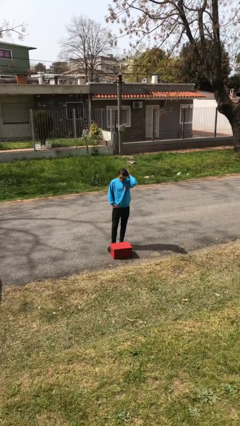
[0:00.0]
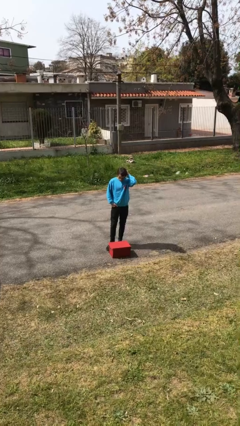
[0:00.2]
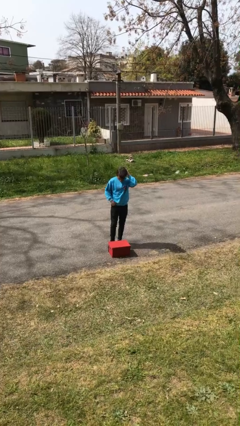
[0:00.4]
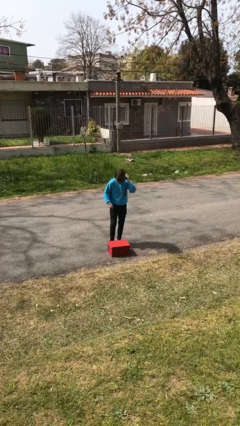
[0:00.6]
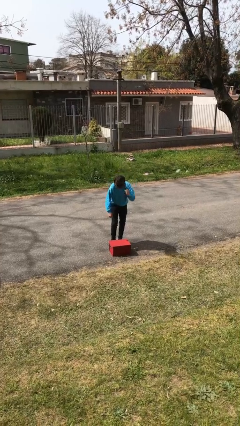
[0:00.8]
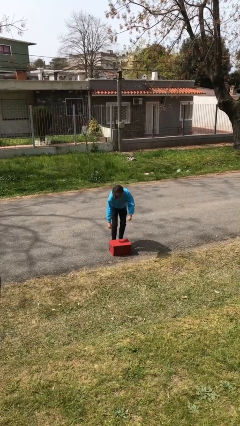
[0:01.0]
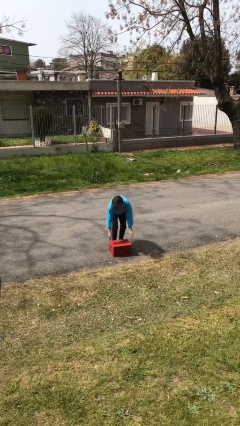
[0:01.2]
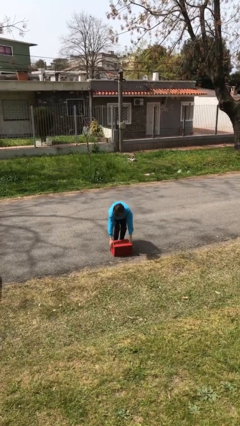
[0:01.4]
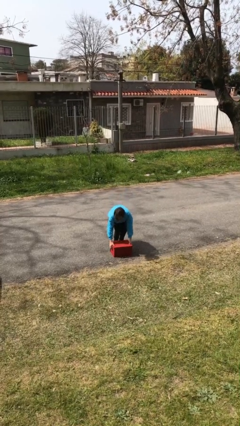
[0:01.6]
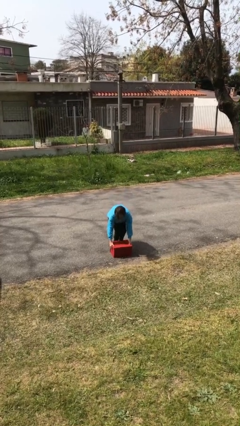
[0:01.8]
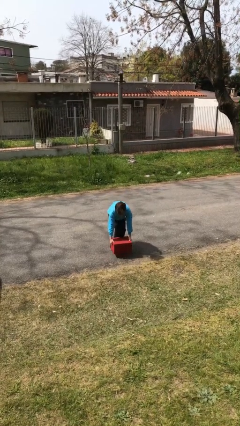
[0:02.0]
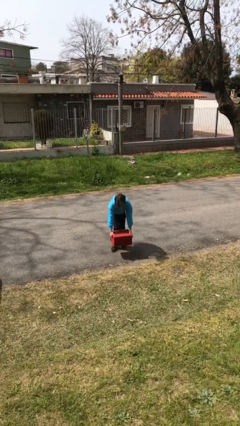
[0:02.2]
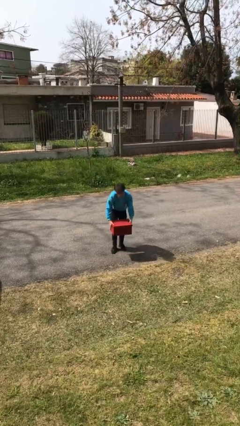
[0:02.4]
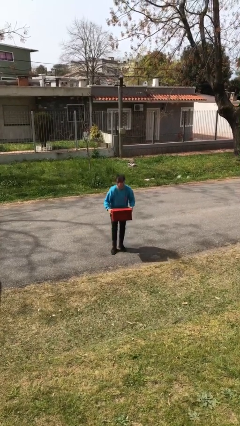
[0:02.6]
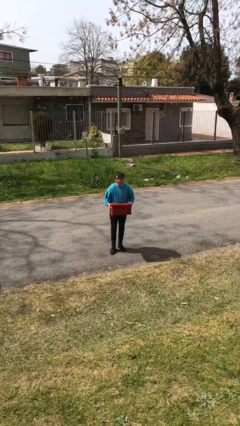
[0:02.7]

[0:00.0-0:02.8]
person picks up object from floor

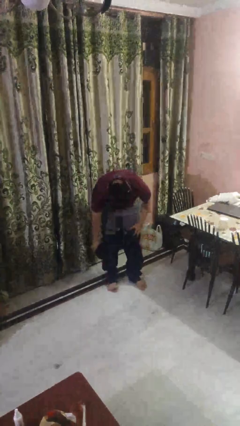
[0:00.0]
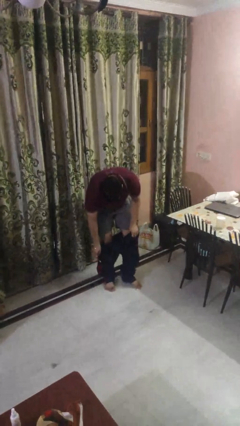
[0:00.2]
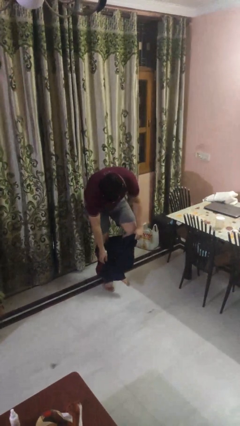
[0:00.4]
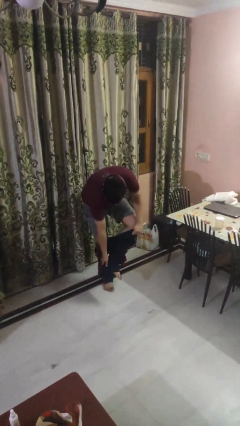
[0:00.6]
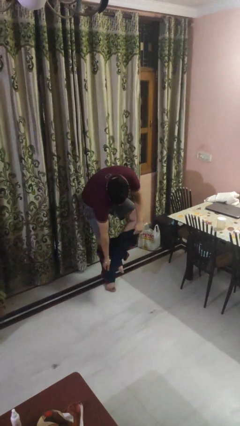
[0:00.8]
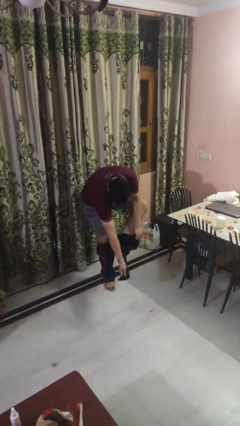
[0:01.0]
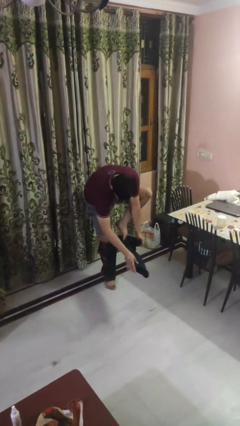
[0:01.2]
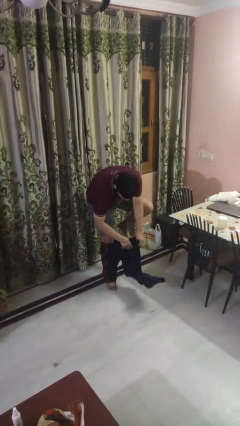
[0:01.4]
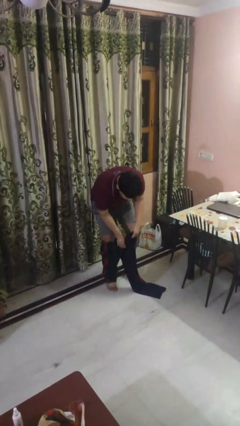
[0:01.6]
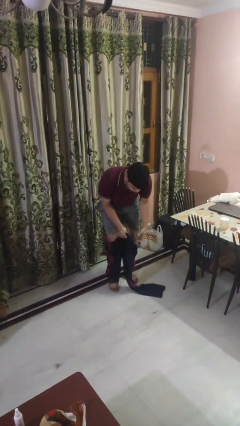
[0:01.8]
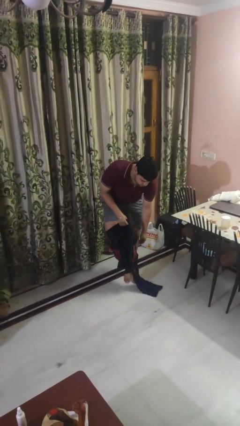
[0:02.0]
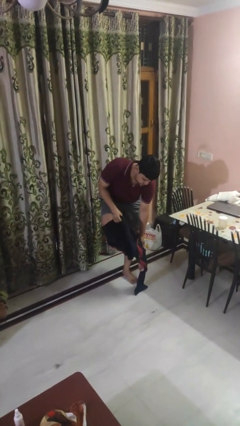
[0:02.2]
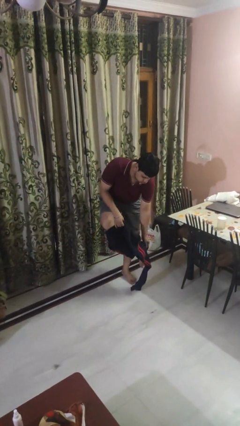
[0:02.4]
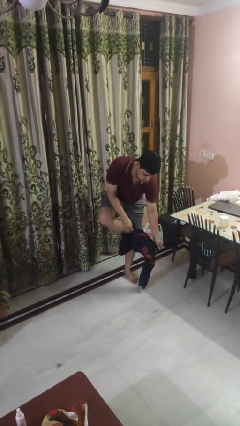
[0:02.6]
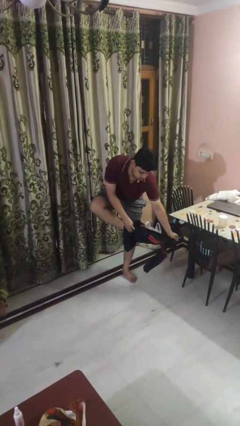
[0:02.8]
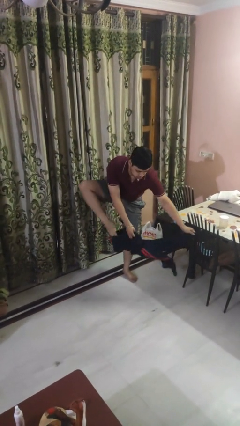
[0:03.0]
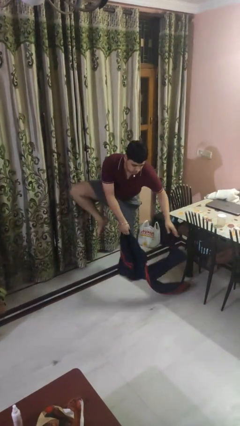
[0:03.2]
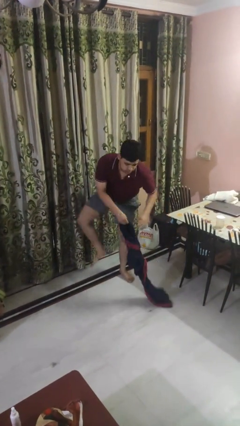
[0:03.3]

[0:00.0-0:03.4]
person takes off pants

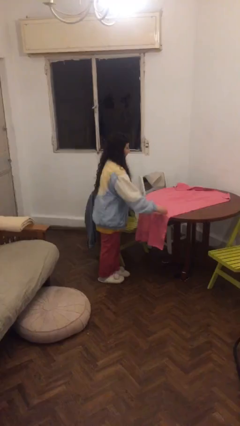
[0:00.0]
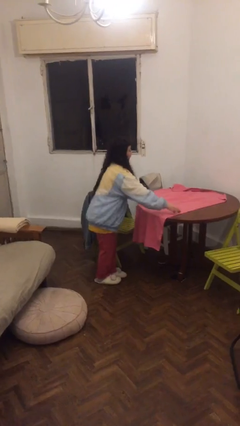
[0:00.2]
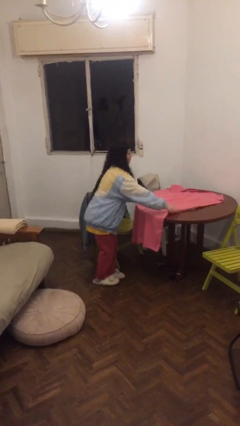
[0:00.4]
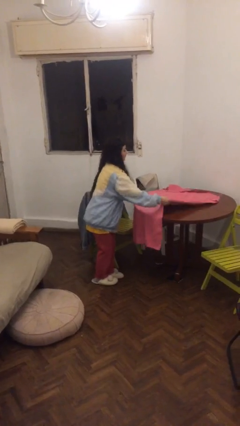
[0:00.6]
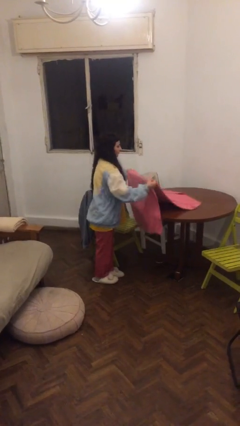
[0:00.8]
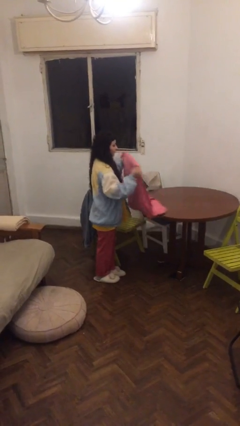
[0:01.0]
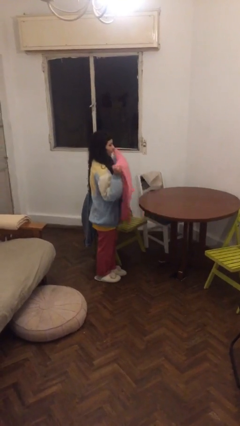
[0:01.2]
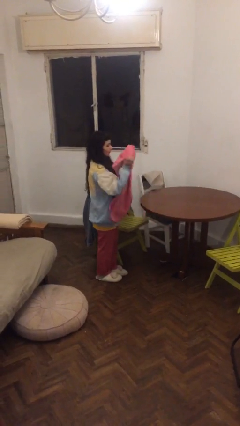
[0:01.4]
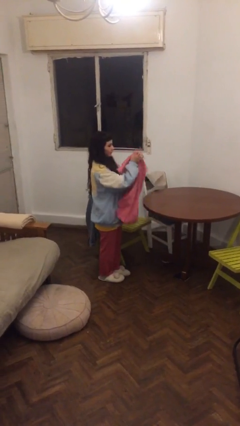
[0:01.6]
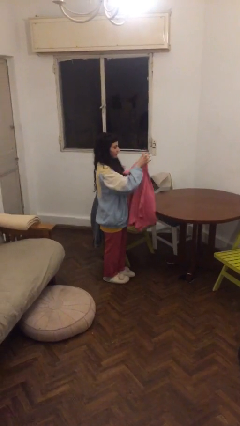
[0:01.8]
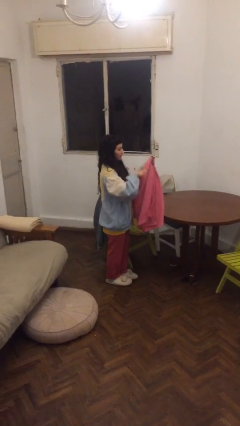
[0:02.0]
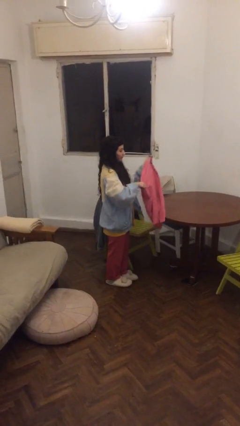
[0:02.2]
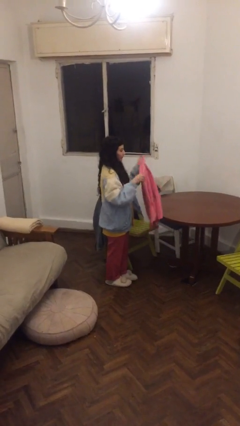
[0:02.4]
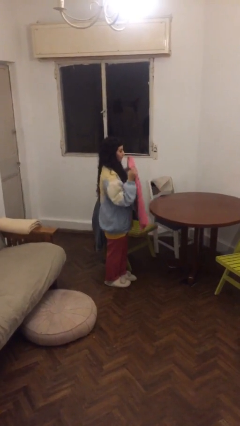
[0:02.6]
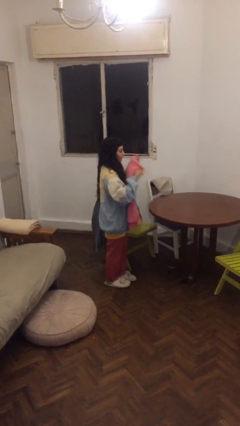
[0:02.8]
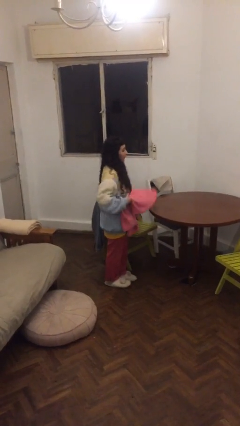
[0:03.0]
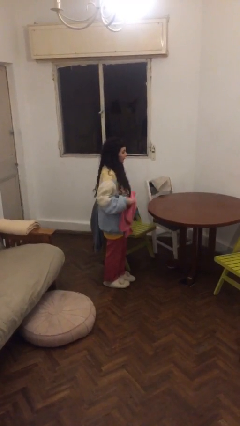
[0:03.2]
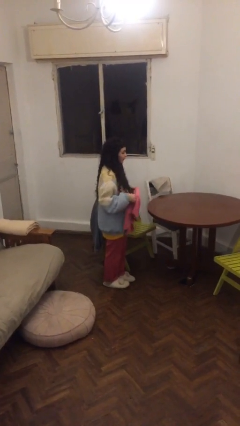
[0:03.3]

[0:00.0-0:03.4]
person folds tablecloth

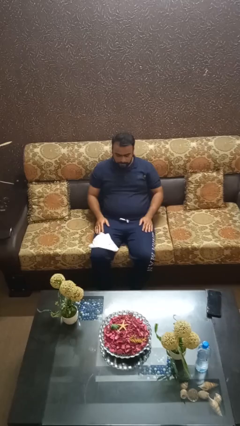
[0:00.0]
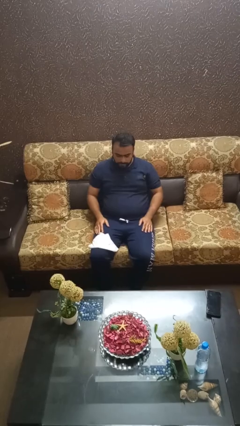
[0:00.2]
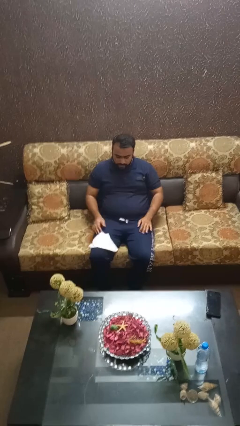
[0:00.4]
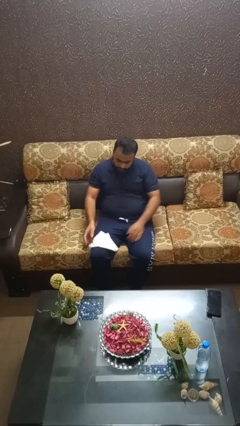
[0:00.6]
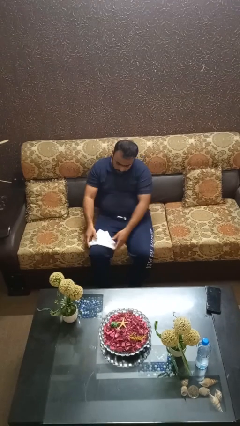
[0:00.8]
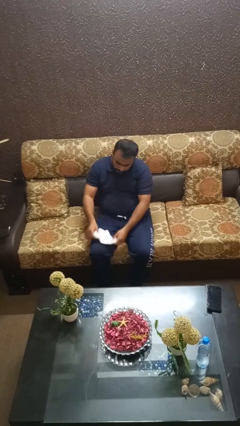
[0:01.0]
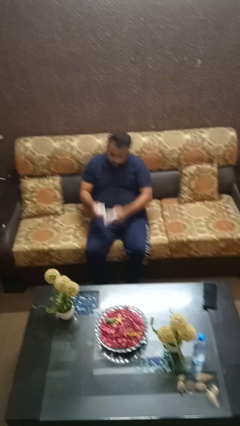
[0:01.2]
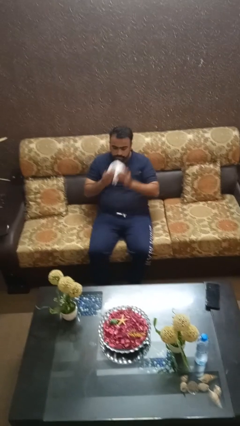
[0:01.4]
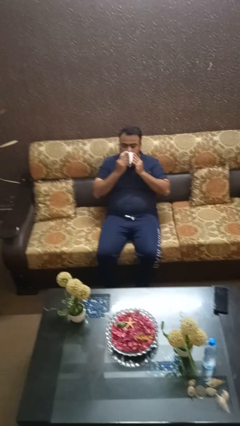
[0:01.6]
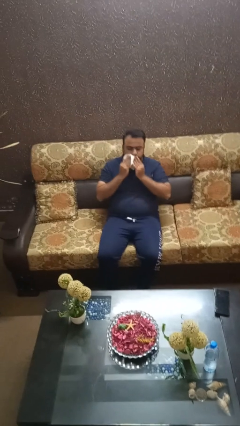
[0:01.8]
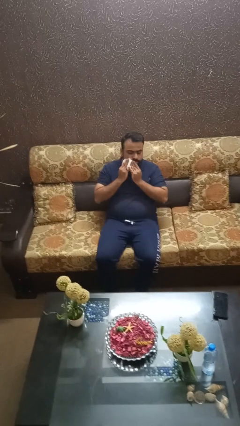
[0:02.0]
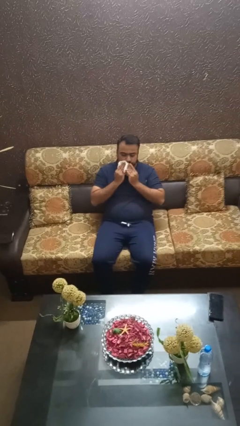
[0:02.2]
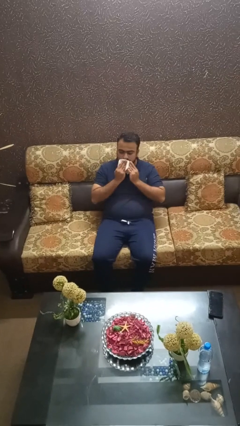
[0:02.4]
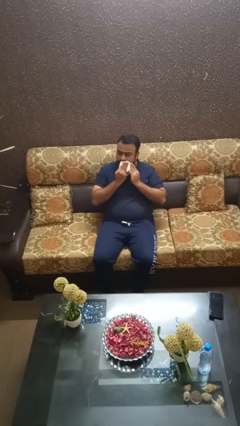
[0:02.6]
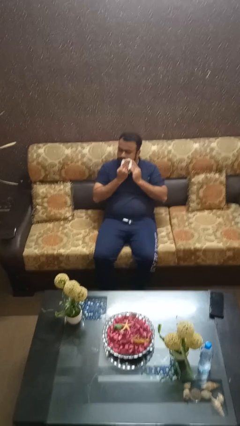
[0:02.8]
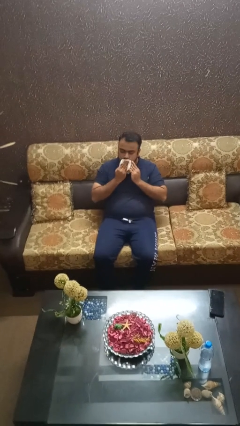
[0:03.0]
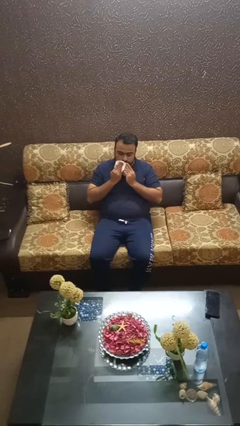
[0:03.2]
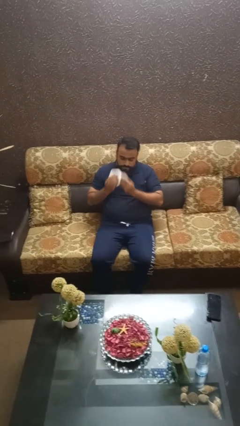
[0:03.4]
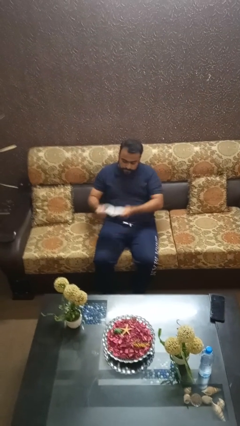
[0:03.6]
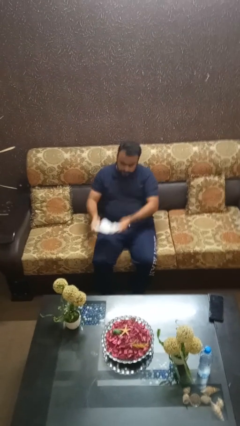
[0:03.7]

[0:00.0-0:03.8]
person wipes mouth with napkin

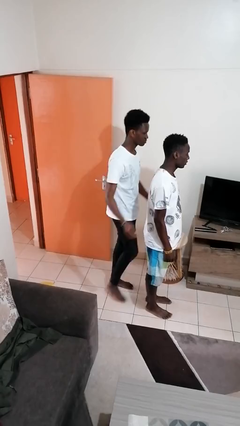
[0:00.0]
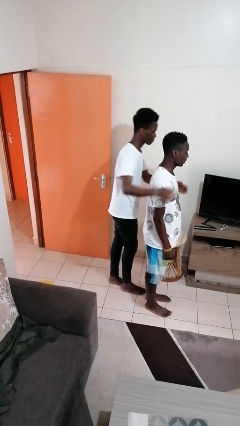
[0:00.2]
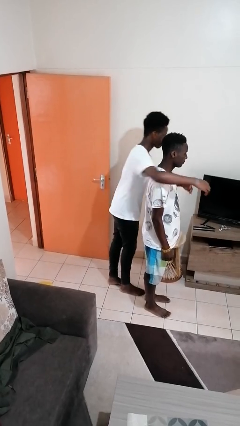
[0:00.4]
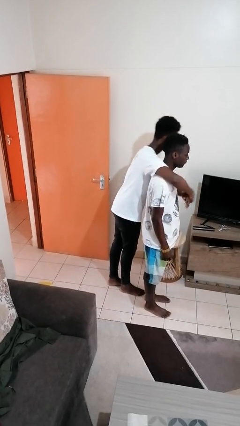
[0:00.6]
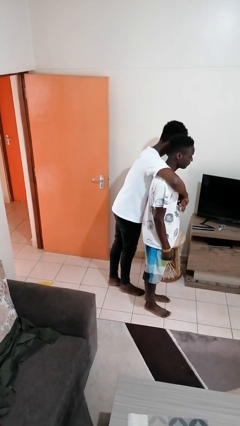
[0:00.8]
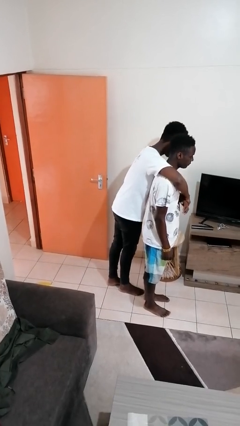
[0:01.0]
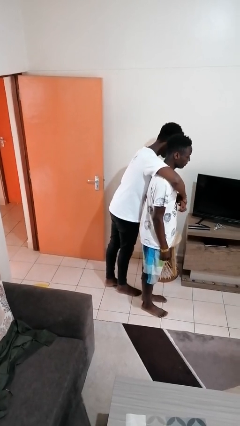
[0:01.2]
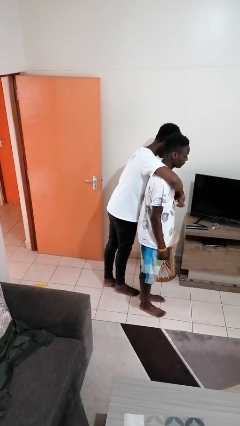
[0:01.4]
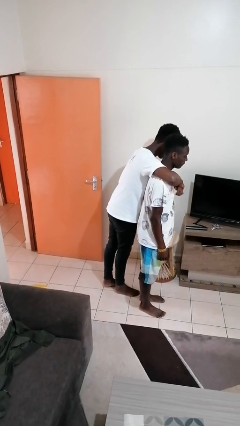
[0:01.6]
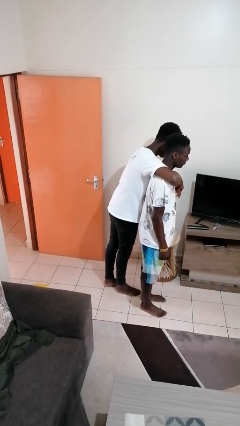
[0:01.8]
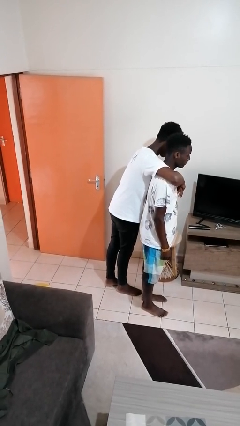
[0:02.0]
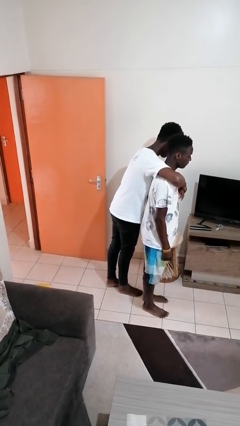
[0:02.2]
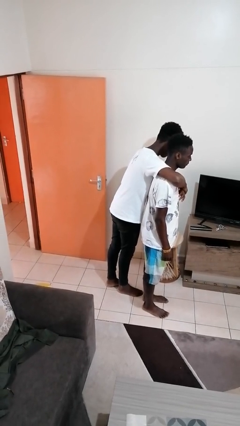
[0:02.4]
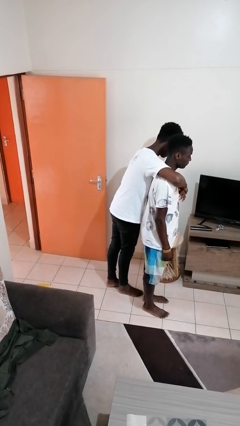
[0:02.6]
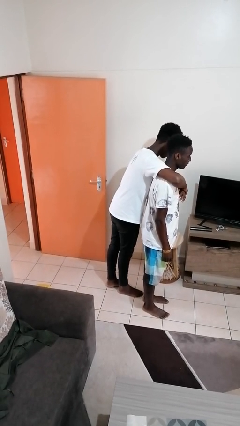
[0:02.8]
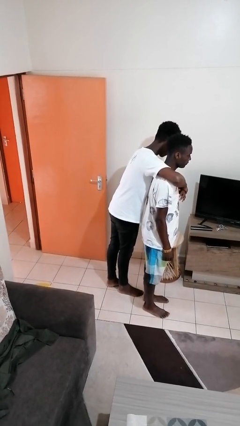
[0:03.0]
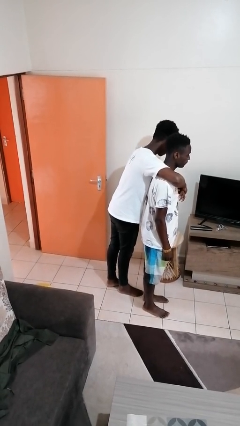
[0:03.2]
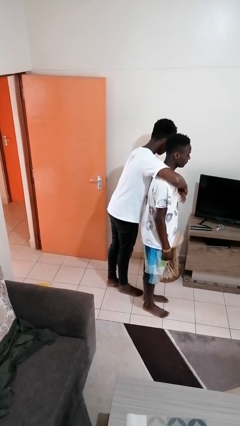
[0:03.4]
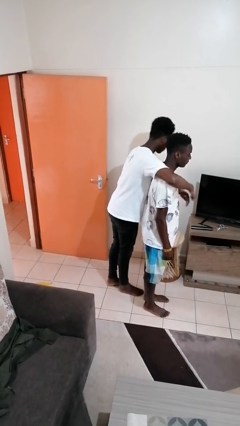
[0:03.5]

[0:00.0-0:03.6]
person hugs person from behind

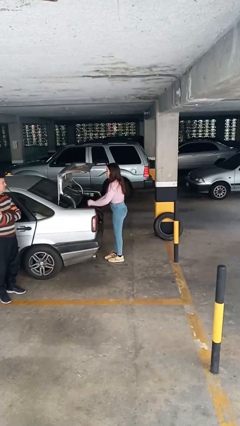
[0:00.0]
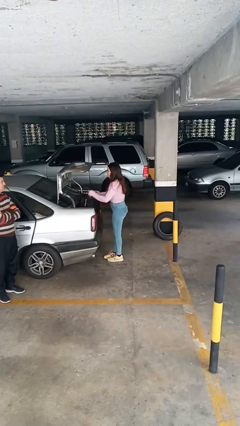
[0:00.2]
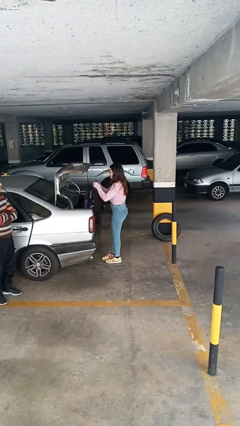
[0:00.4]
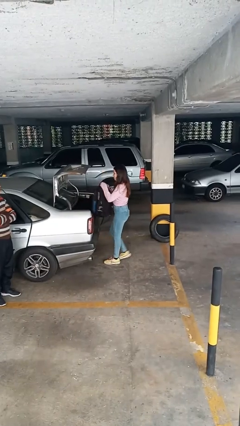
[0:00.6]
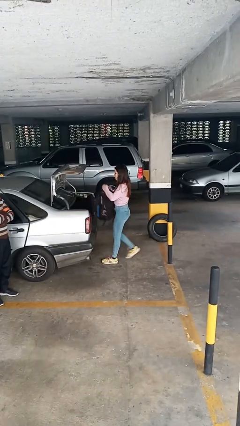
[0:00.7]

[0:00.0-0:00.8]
person unloads car
